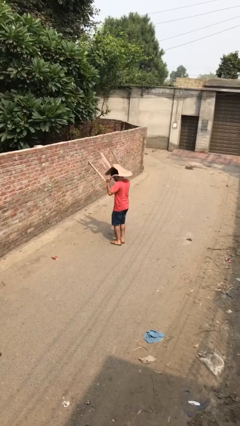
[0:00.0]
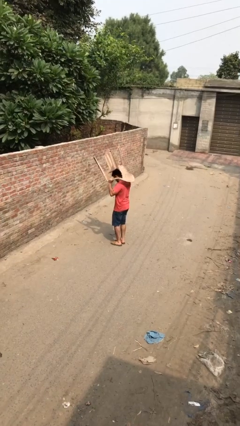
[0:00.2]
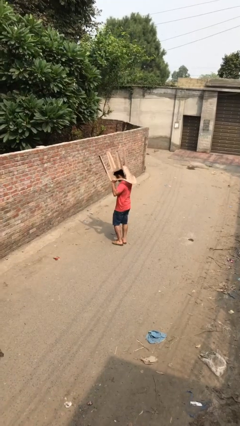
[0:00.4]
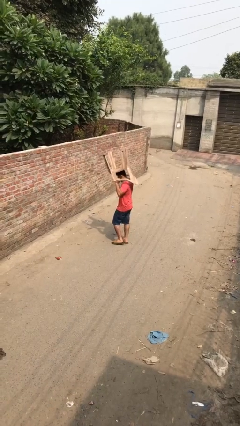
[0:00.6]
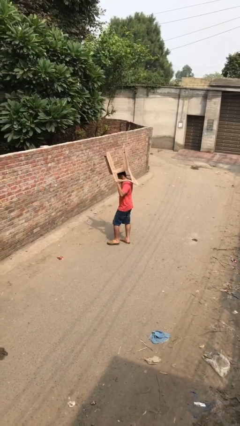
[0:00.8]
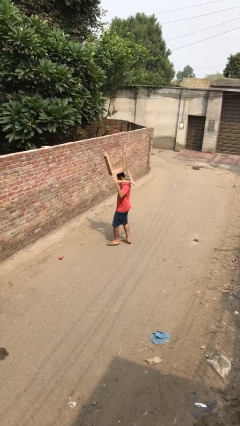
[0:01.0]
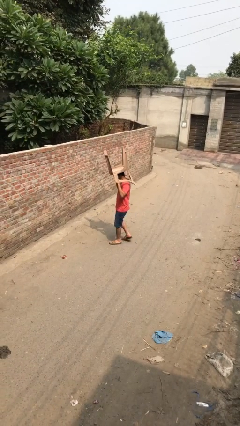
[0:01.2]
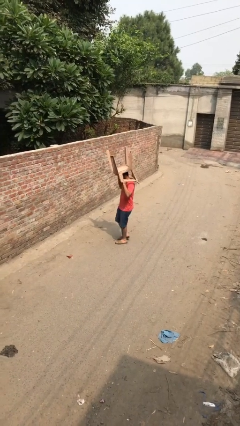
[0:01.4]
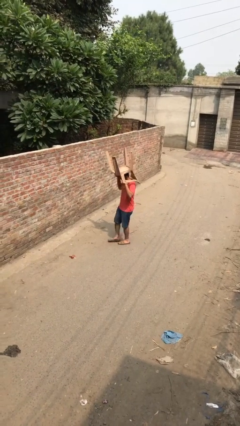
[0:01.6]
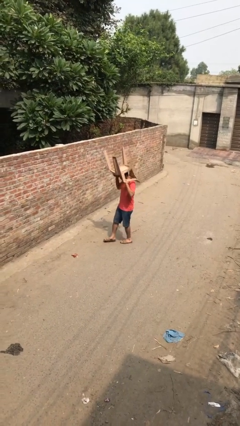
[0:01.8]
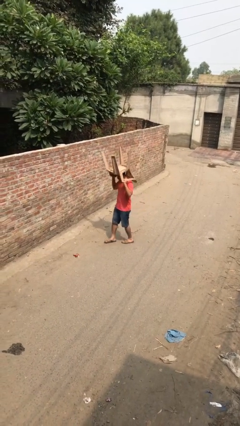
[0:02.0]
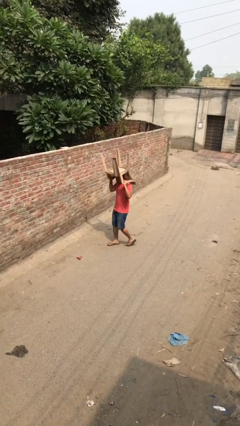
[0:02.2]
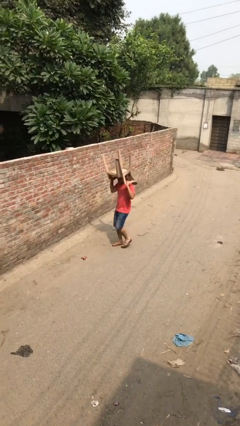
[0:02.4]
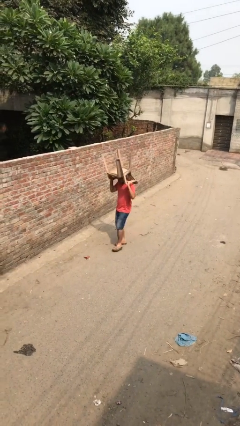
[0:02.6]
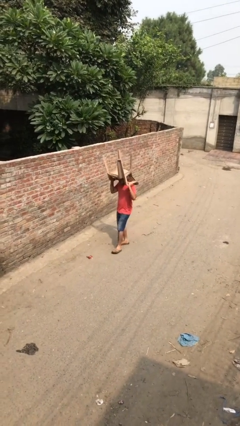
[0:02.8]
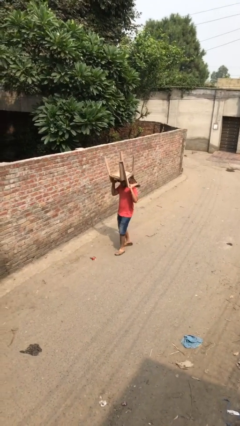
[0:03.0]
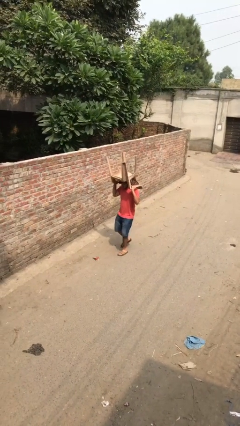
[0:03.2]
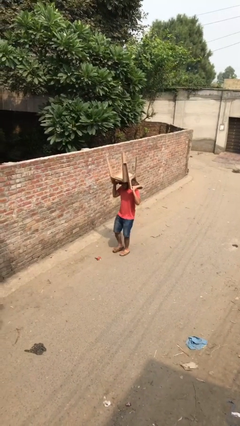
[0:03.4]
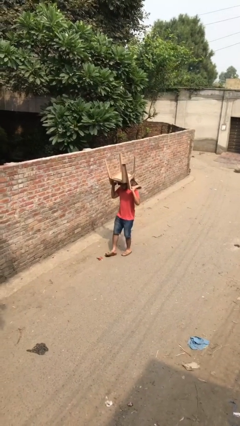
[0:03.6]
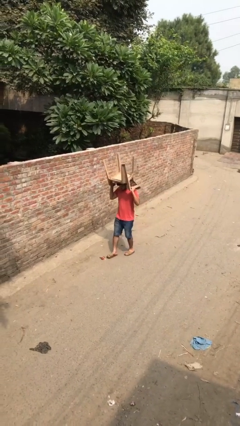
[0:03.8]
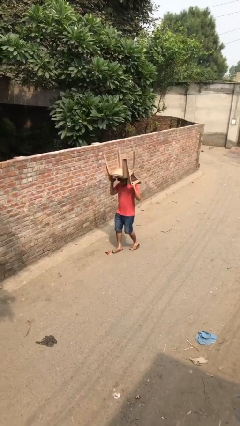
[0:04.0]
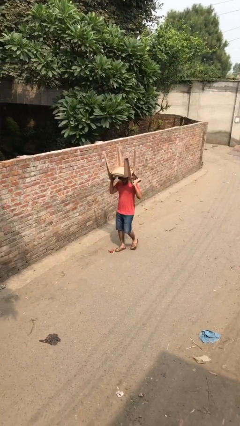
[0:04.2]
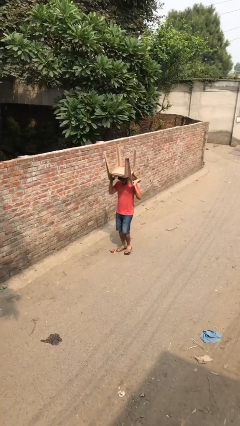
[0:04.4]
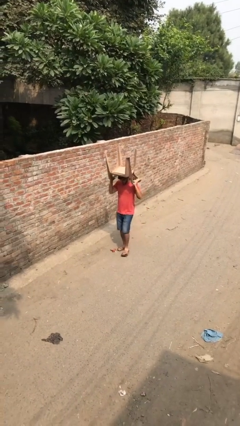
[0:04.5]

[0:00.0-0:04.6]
person carries heavy object

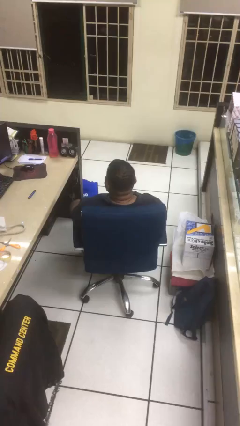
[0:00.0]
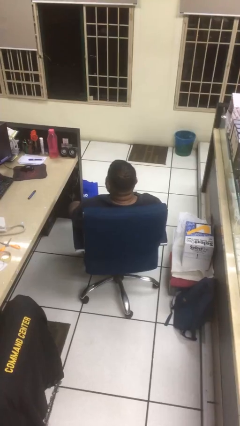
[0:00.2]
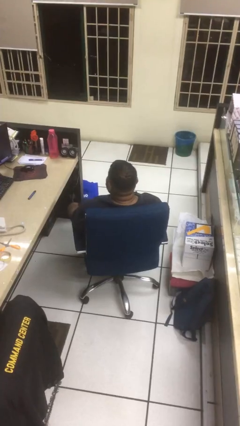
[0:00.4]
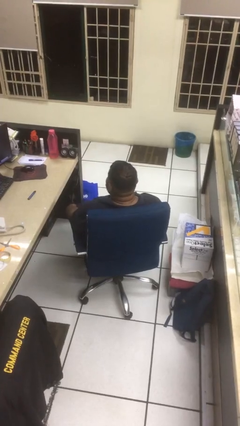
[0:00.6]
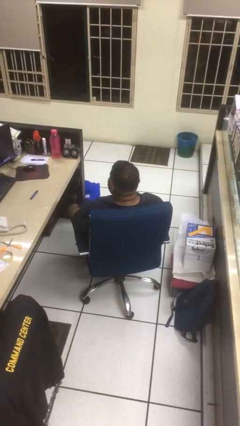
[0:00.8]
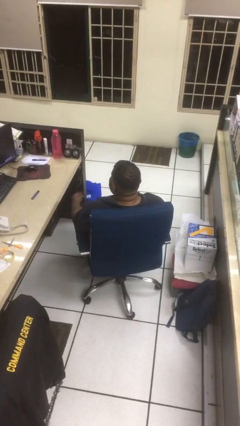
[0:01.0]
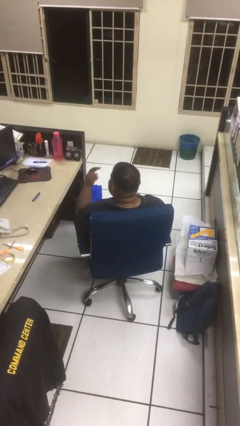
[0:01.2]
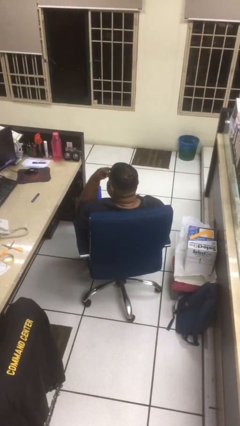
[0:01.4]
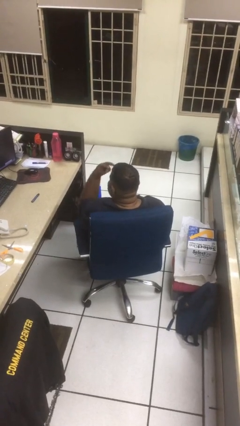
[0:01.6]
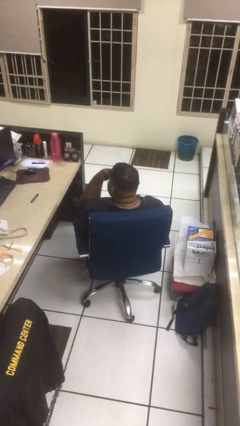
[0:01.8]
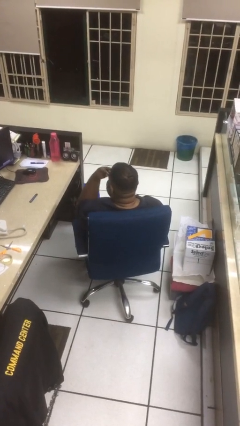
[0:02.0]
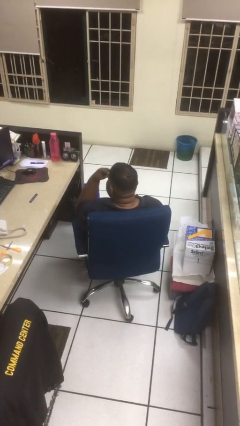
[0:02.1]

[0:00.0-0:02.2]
person gestures watch closely

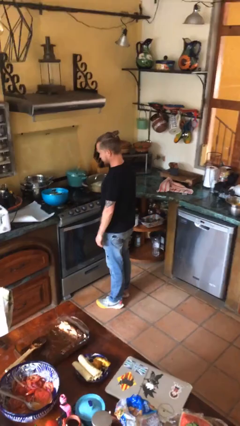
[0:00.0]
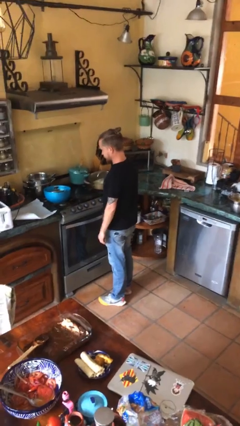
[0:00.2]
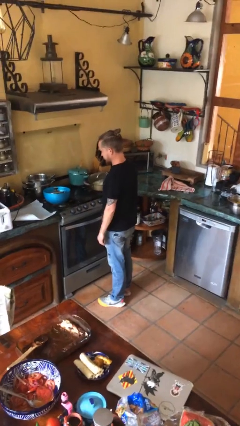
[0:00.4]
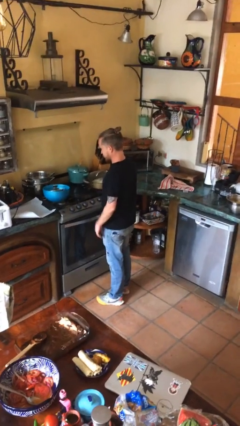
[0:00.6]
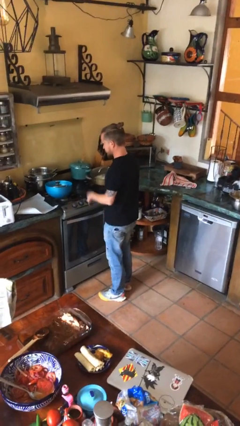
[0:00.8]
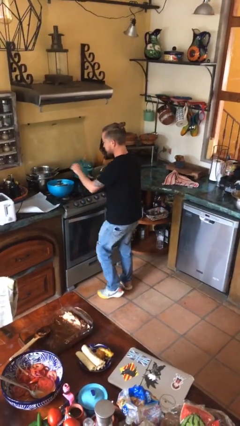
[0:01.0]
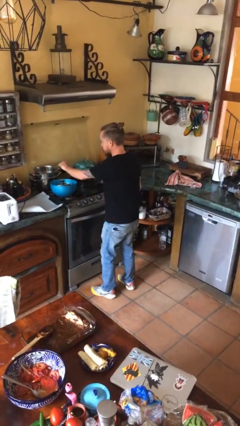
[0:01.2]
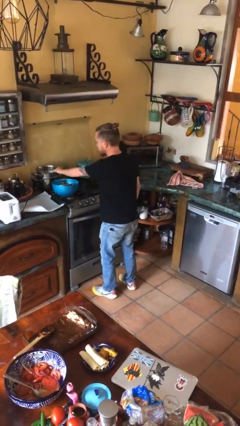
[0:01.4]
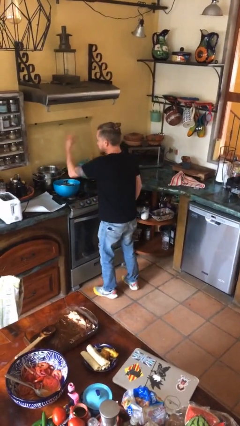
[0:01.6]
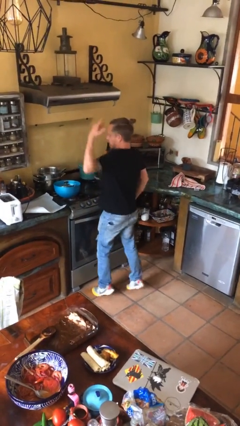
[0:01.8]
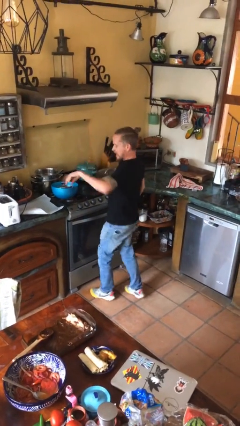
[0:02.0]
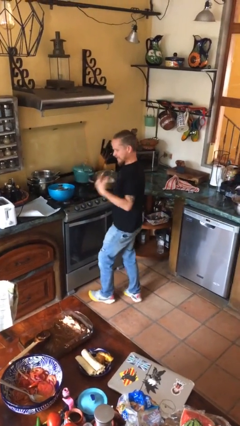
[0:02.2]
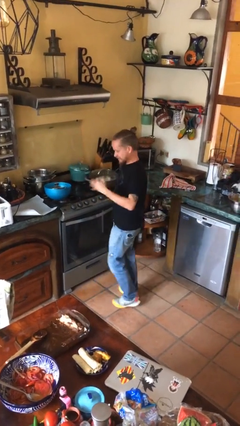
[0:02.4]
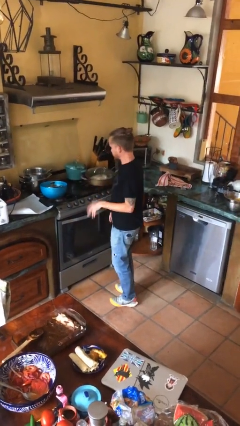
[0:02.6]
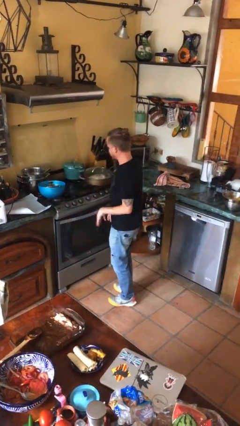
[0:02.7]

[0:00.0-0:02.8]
person burns hand

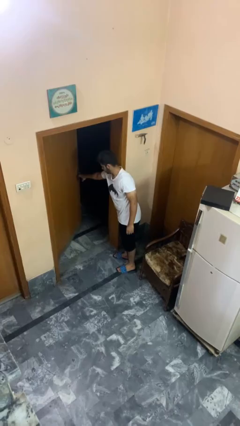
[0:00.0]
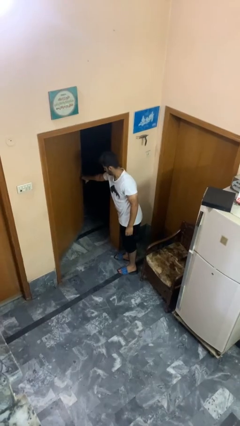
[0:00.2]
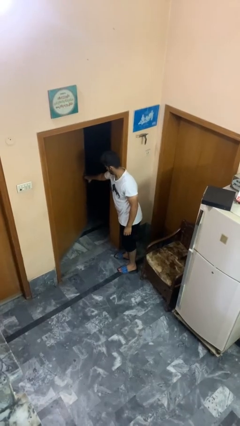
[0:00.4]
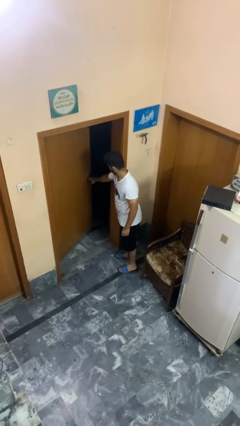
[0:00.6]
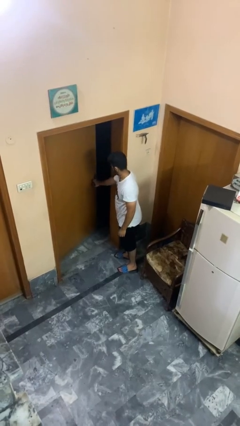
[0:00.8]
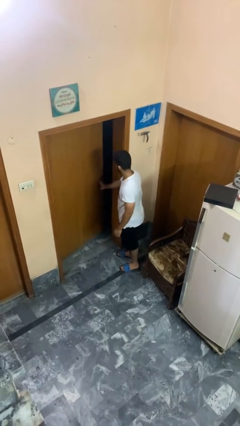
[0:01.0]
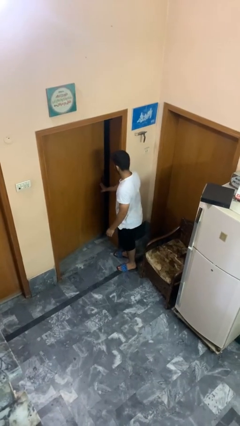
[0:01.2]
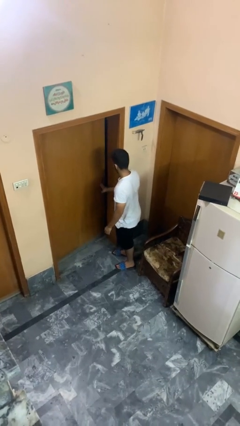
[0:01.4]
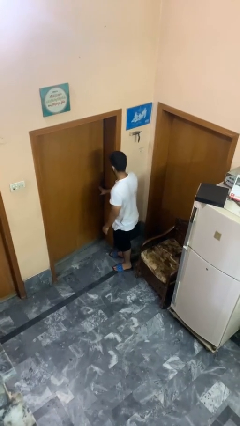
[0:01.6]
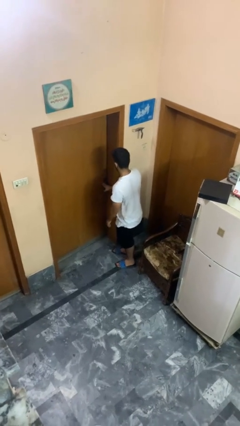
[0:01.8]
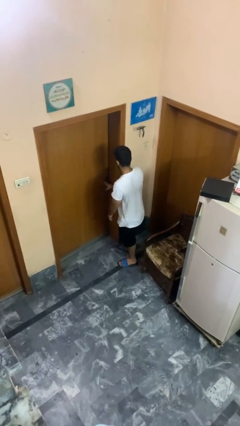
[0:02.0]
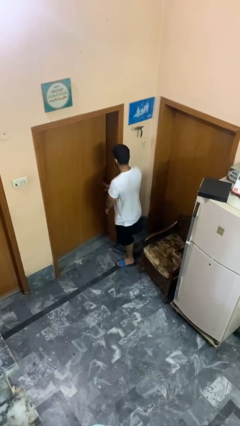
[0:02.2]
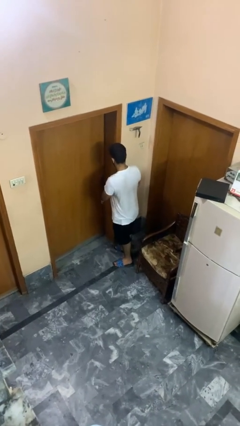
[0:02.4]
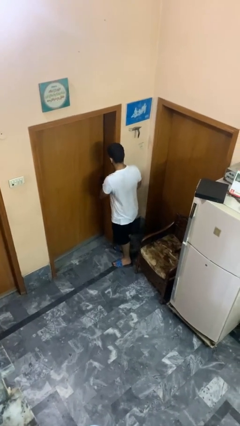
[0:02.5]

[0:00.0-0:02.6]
person closes facility door

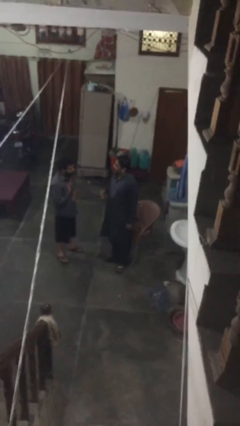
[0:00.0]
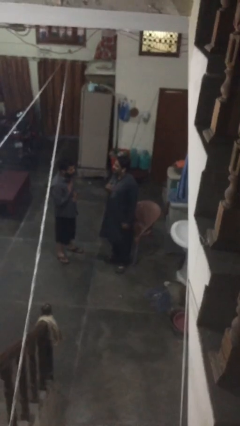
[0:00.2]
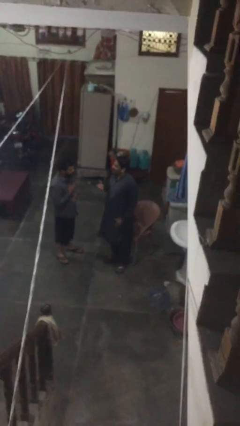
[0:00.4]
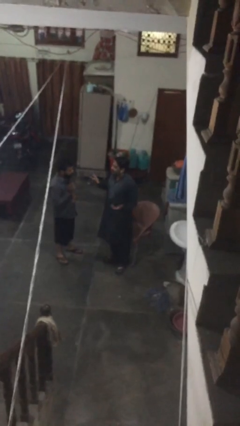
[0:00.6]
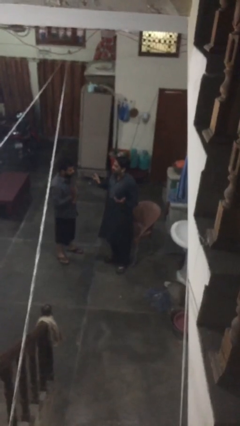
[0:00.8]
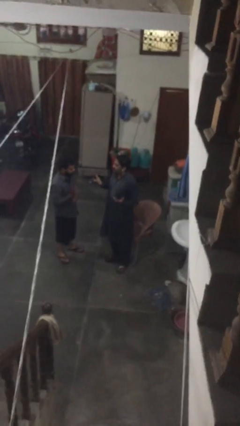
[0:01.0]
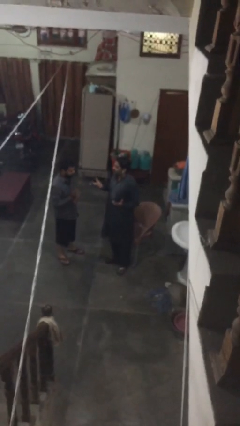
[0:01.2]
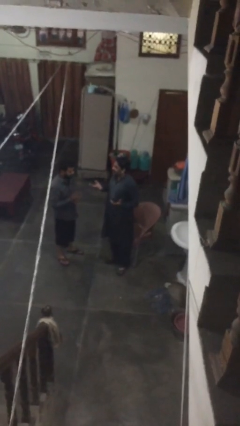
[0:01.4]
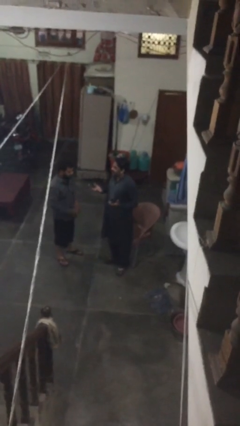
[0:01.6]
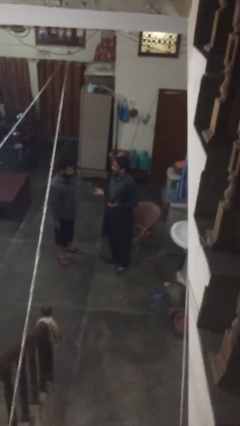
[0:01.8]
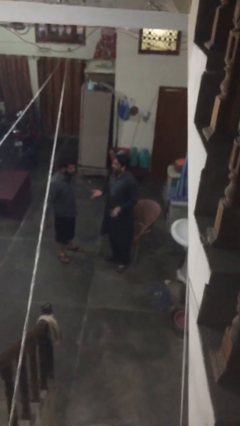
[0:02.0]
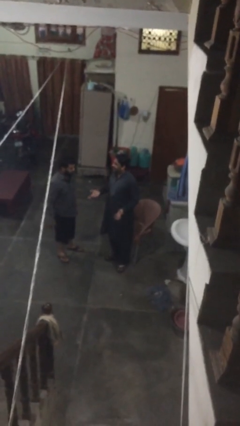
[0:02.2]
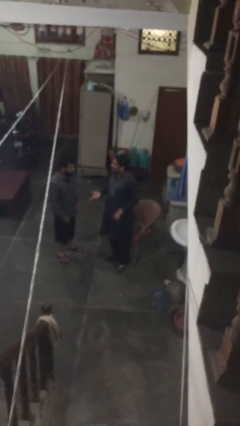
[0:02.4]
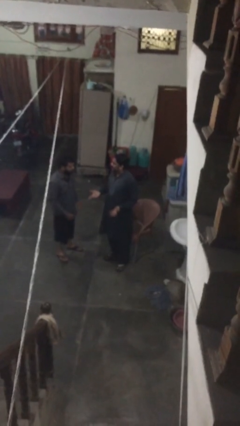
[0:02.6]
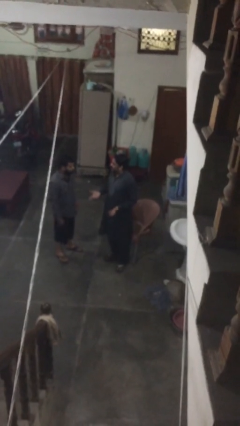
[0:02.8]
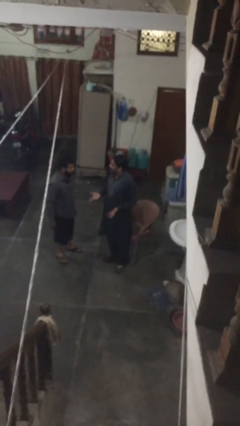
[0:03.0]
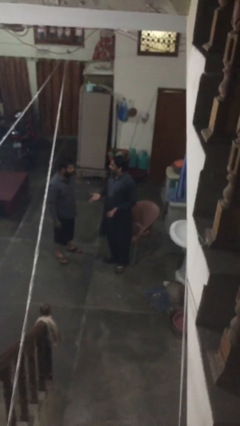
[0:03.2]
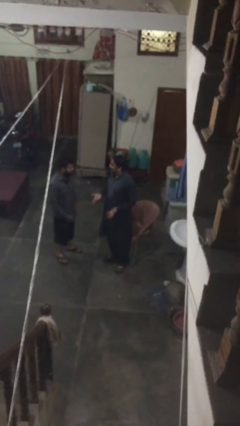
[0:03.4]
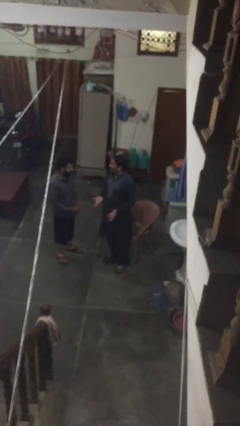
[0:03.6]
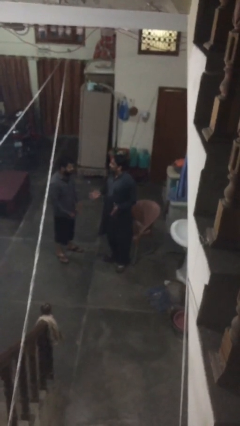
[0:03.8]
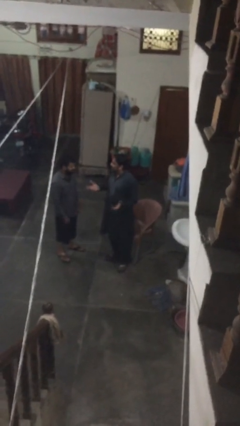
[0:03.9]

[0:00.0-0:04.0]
person talks to person

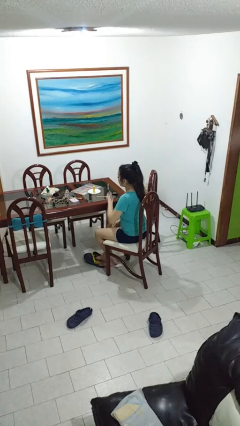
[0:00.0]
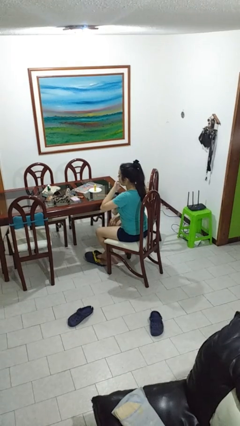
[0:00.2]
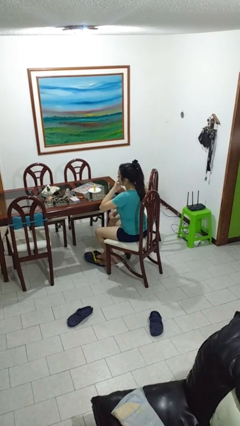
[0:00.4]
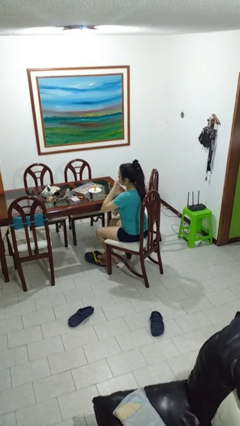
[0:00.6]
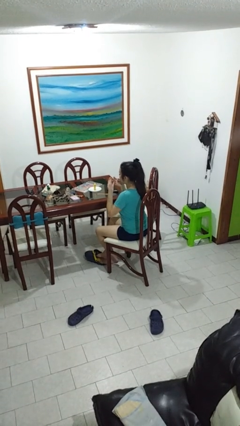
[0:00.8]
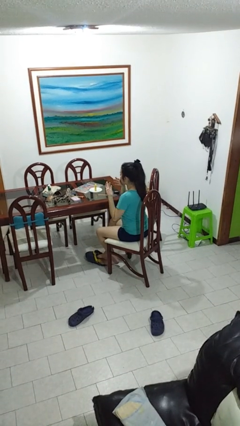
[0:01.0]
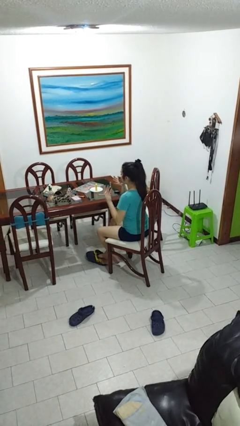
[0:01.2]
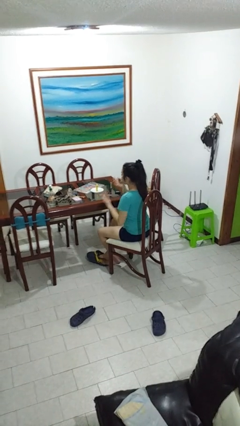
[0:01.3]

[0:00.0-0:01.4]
person licks fingers

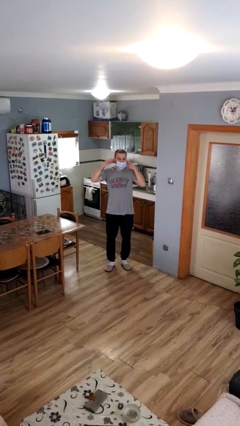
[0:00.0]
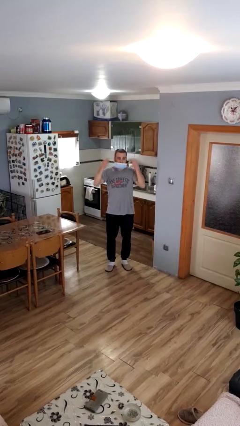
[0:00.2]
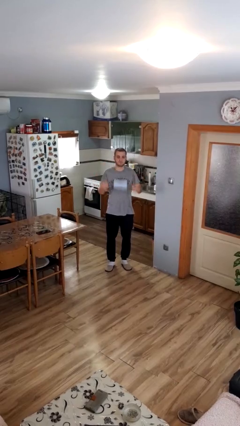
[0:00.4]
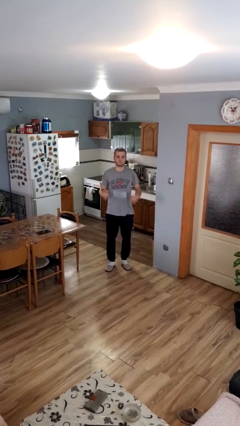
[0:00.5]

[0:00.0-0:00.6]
person takes off facemask
